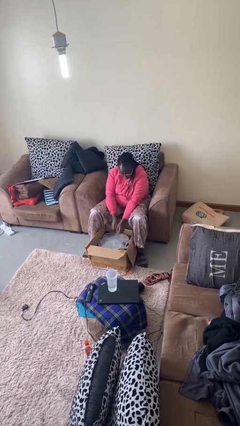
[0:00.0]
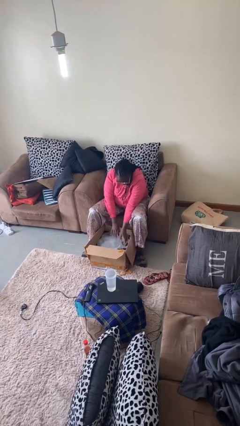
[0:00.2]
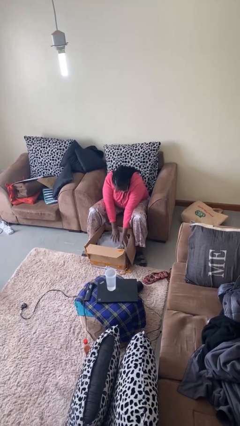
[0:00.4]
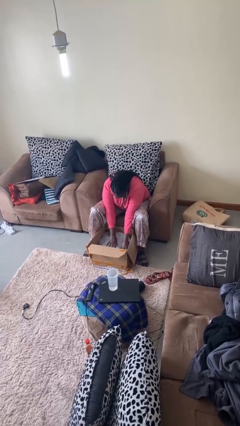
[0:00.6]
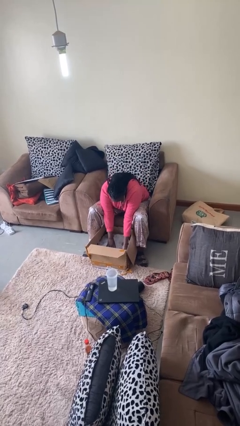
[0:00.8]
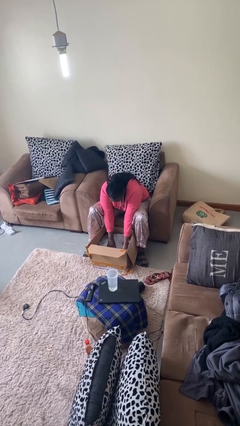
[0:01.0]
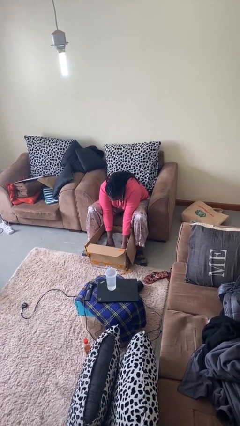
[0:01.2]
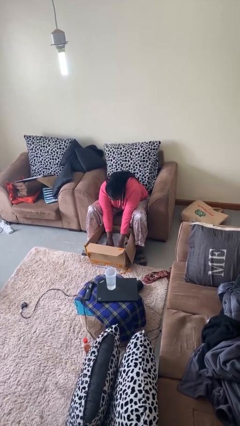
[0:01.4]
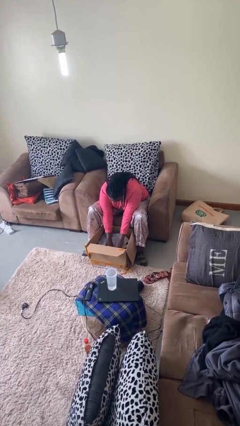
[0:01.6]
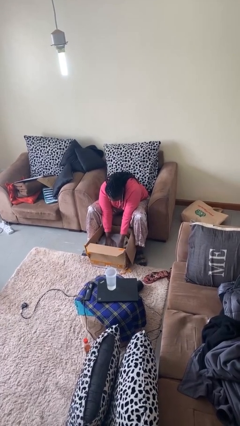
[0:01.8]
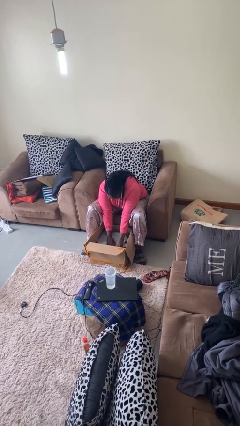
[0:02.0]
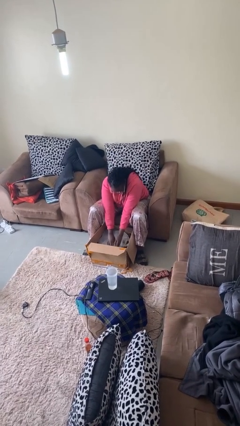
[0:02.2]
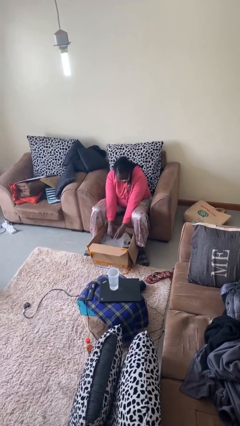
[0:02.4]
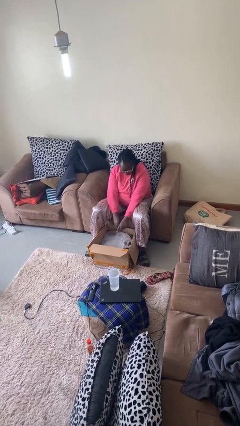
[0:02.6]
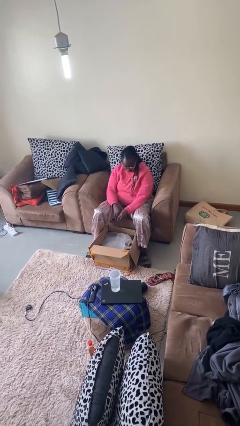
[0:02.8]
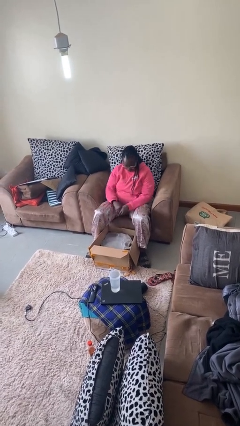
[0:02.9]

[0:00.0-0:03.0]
person searches in box

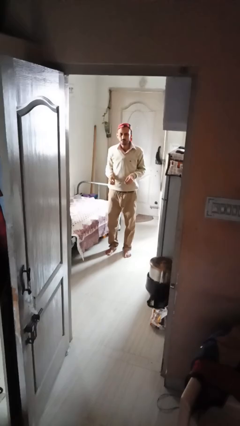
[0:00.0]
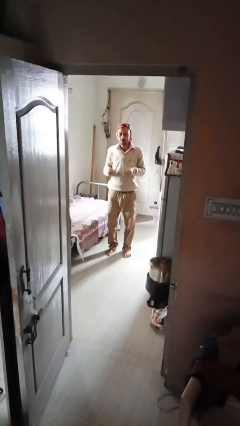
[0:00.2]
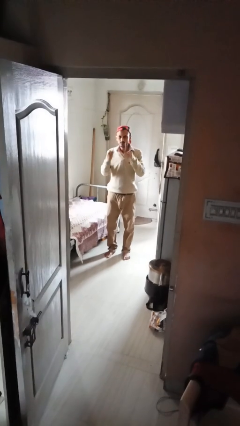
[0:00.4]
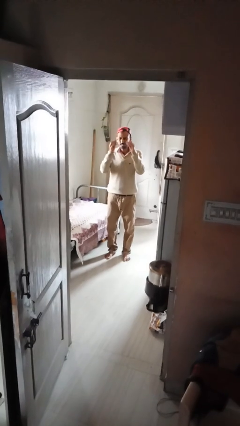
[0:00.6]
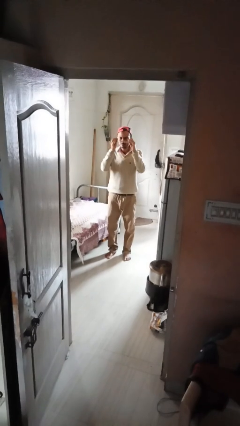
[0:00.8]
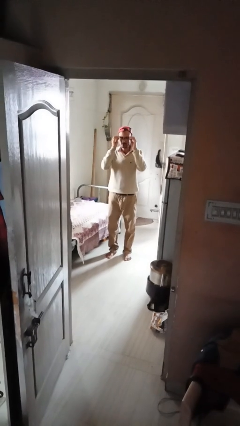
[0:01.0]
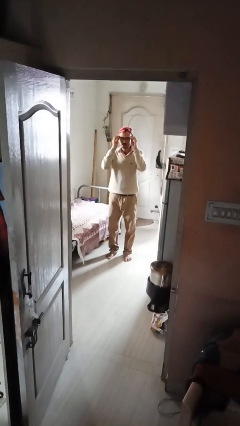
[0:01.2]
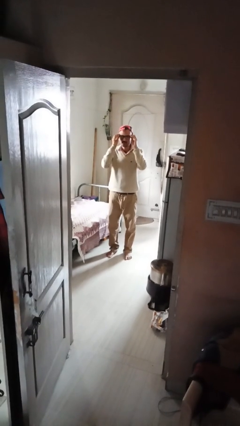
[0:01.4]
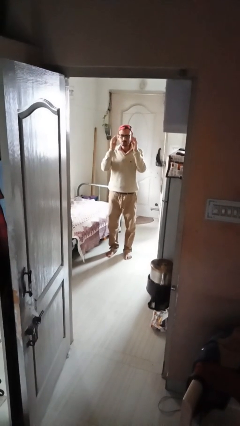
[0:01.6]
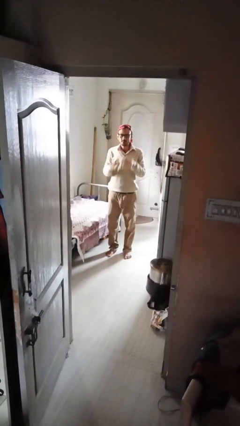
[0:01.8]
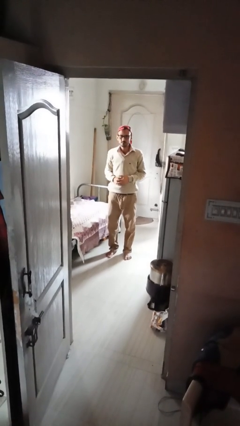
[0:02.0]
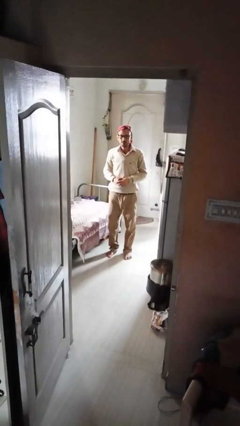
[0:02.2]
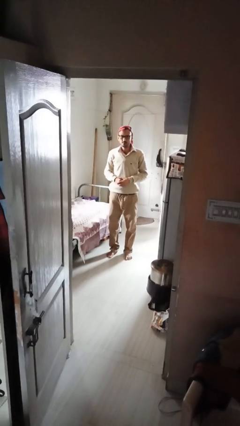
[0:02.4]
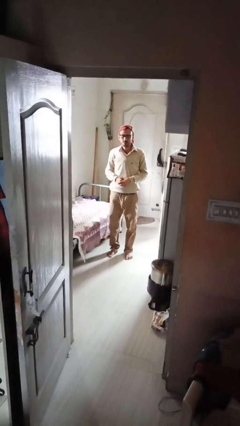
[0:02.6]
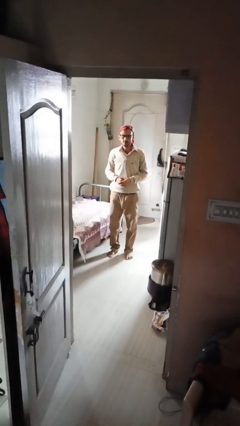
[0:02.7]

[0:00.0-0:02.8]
person puts on sunglasses

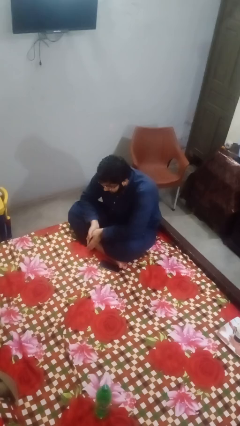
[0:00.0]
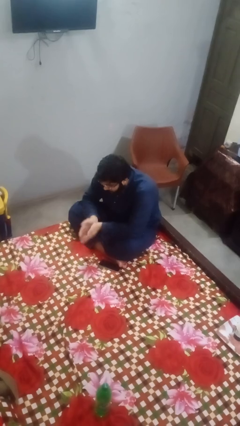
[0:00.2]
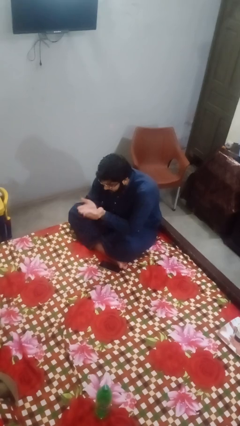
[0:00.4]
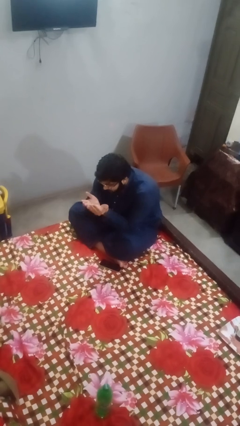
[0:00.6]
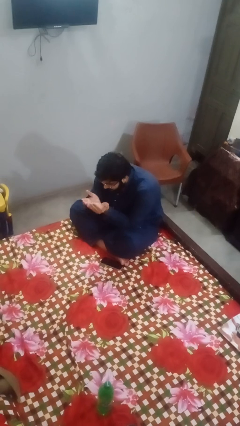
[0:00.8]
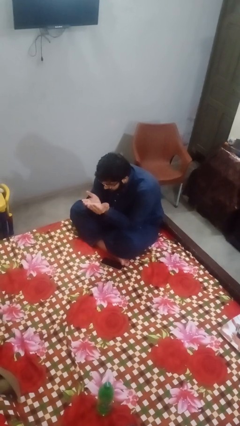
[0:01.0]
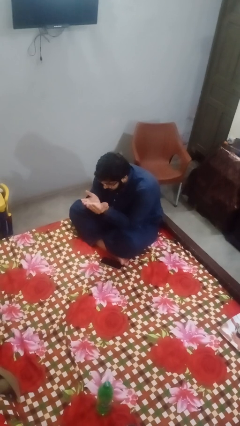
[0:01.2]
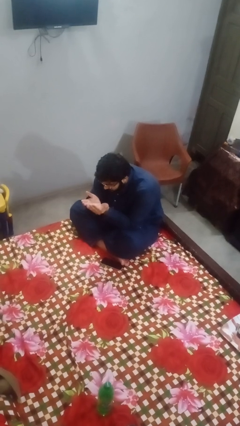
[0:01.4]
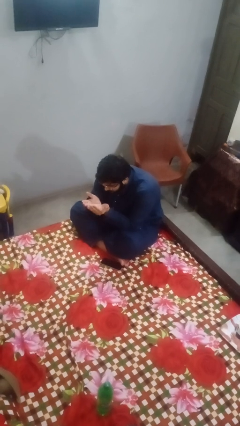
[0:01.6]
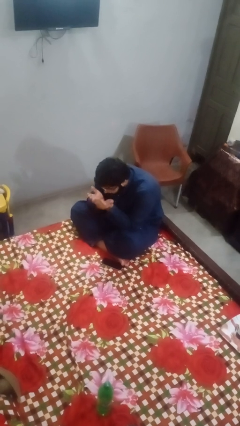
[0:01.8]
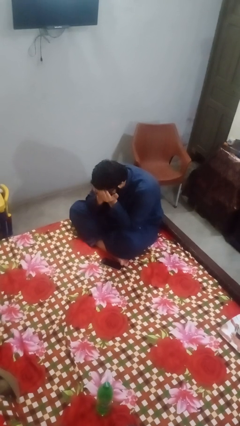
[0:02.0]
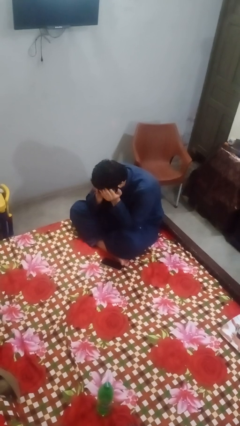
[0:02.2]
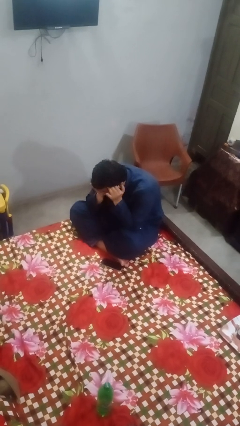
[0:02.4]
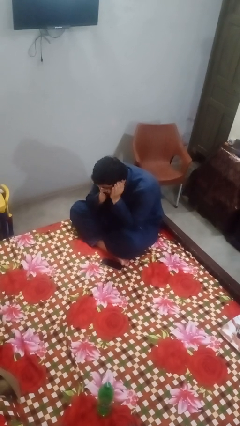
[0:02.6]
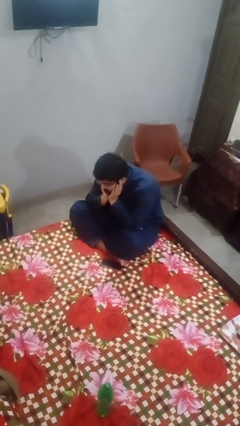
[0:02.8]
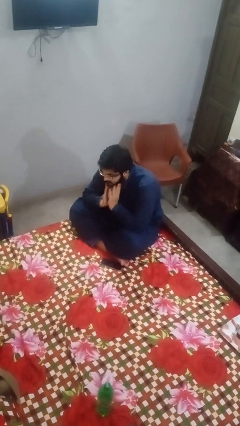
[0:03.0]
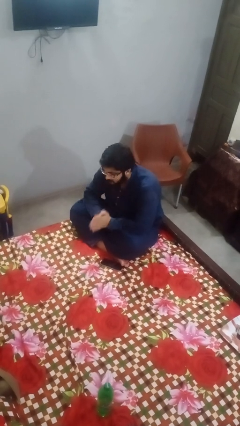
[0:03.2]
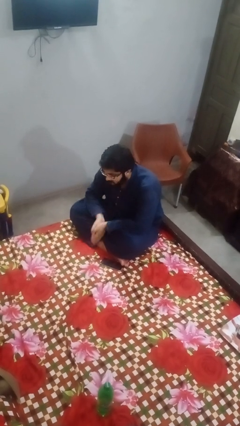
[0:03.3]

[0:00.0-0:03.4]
person prays

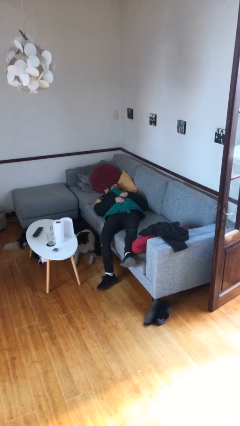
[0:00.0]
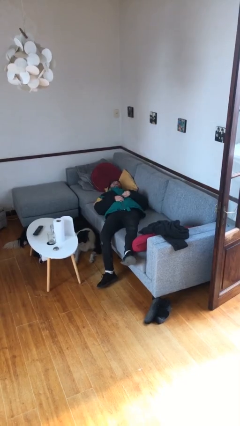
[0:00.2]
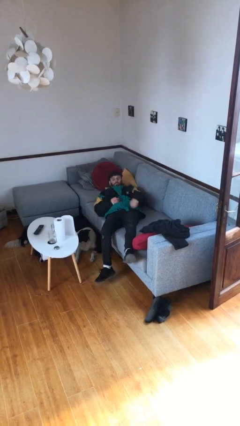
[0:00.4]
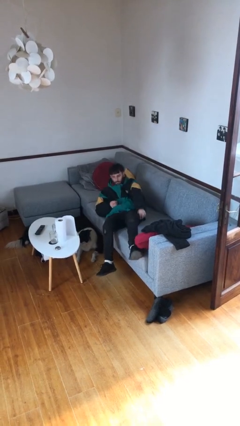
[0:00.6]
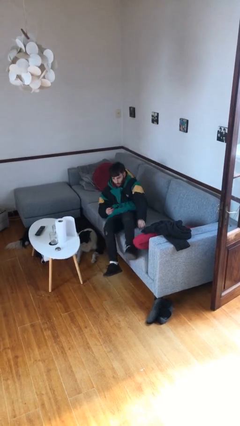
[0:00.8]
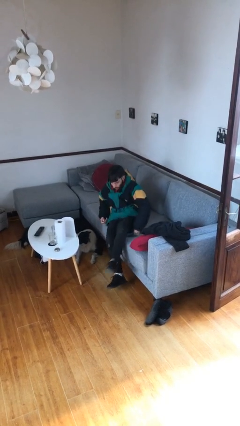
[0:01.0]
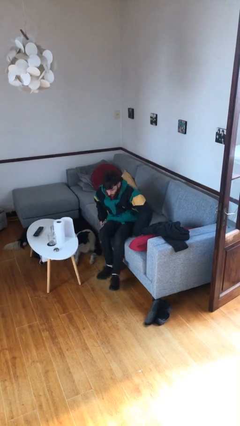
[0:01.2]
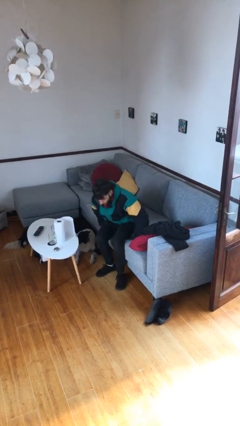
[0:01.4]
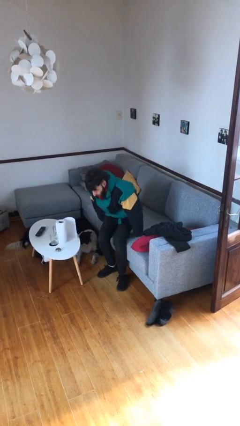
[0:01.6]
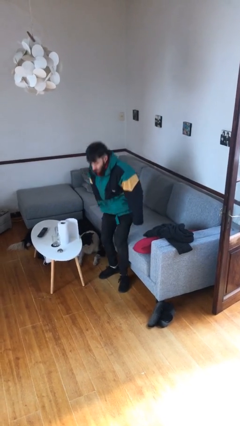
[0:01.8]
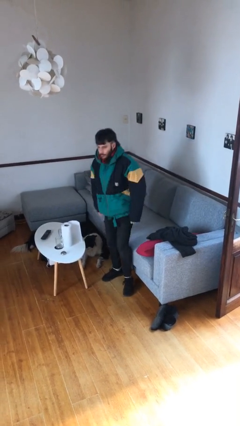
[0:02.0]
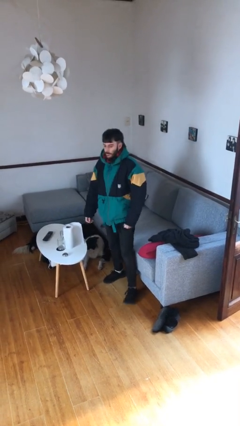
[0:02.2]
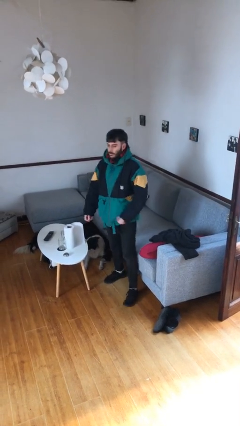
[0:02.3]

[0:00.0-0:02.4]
person stands up

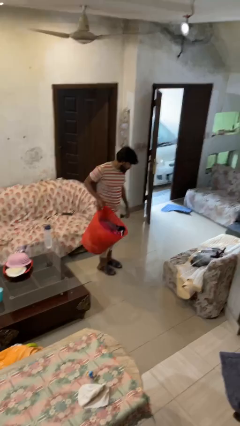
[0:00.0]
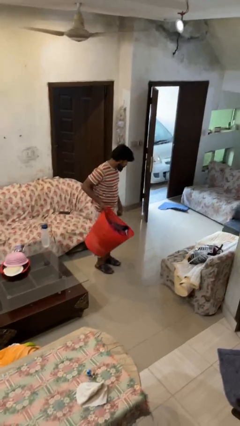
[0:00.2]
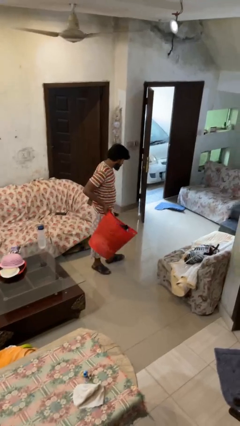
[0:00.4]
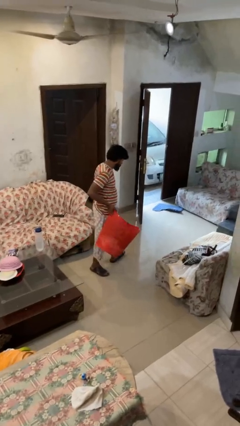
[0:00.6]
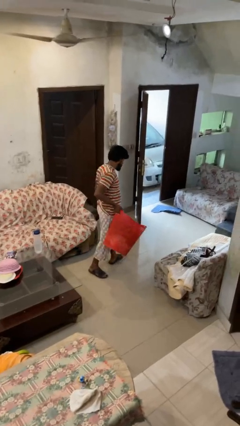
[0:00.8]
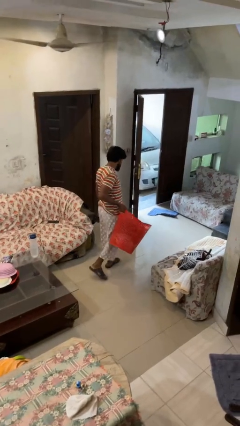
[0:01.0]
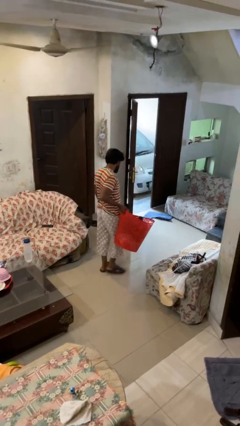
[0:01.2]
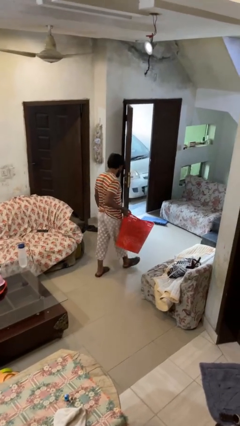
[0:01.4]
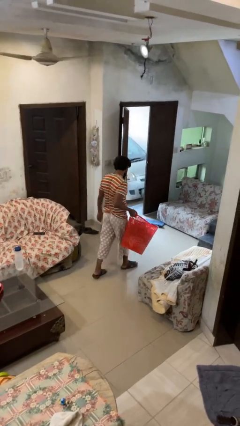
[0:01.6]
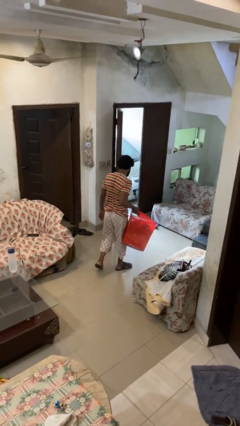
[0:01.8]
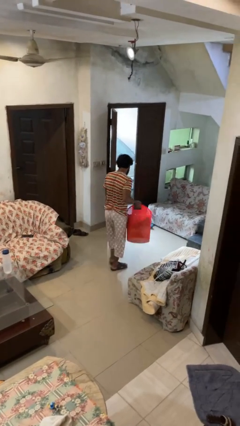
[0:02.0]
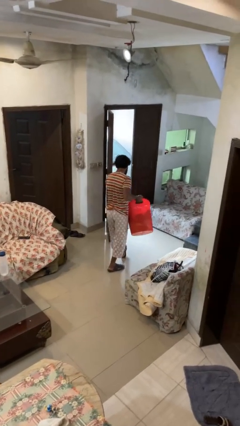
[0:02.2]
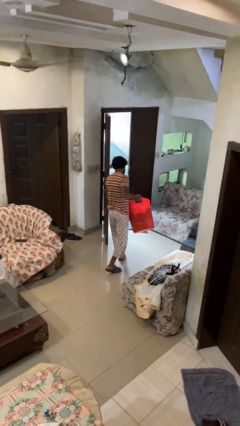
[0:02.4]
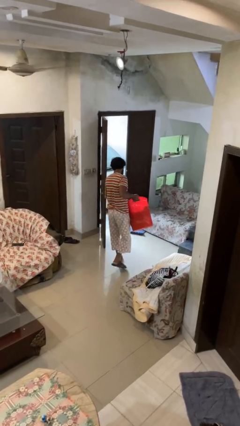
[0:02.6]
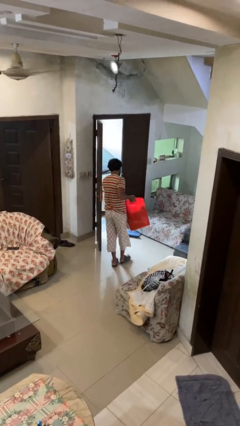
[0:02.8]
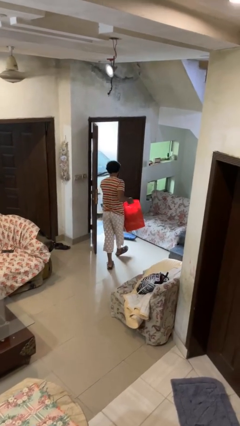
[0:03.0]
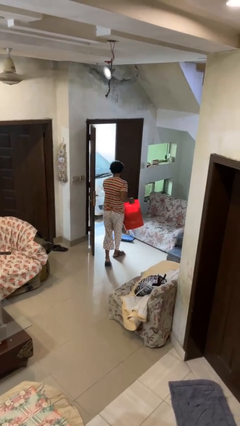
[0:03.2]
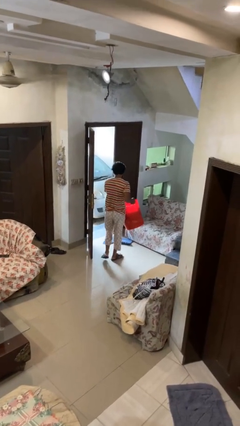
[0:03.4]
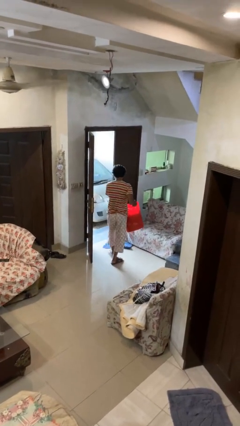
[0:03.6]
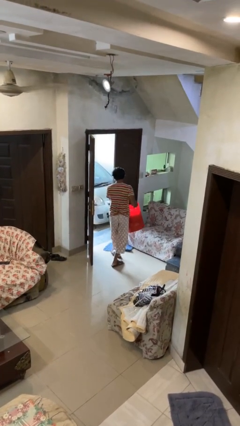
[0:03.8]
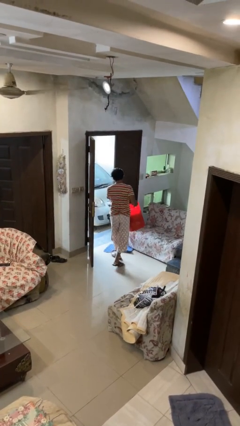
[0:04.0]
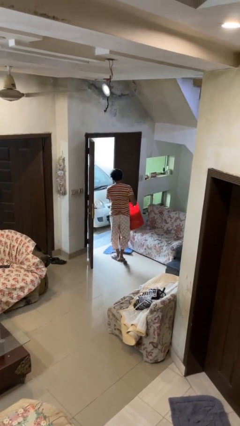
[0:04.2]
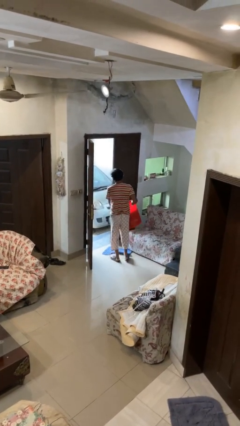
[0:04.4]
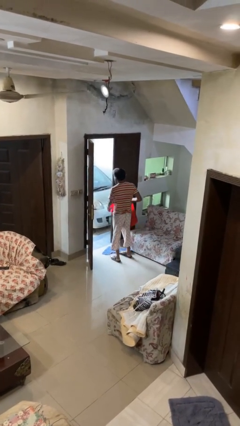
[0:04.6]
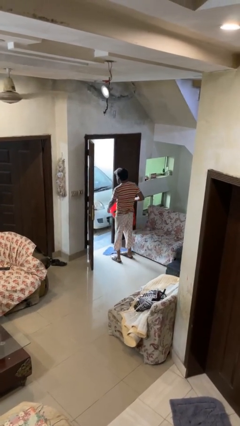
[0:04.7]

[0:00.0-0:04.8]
person carries laundry basket

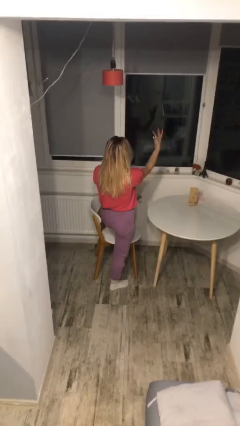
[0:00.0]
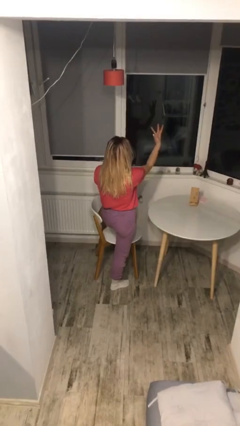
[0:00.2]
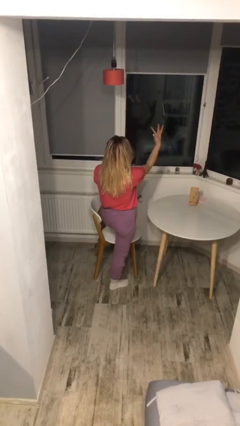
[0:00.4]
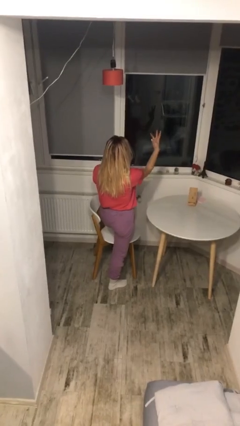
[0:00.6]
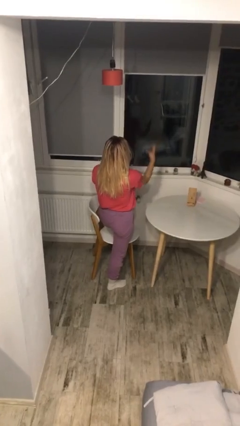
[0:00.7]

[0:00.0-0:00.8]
person gestures number three

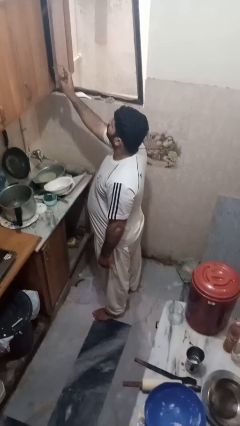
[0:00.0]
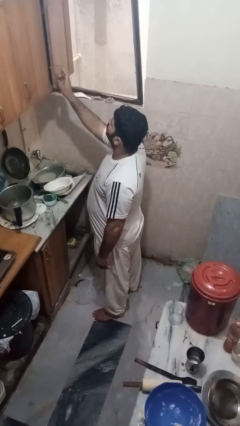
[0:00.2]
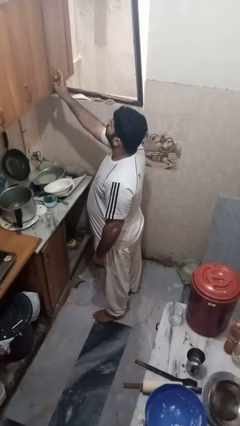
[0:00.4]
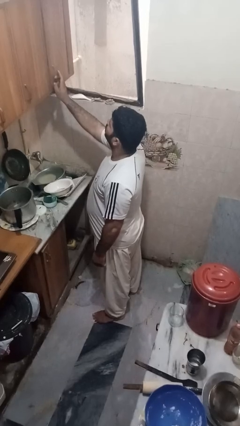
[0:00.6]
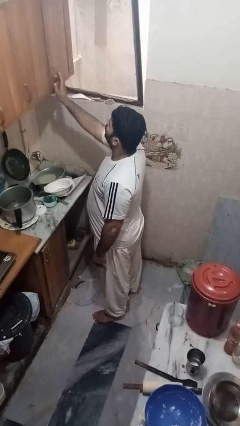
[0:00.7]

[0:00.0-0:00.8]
person closes cabinet
